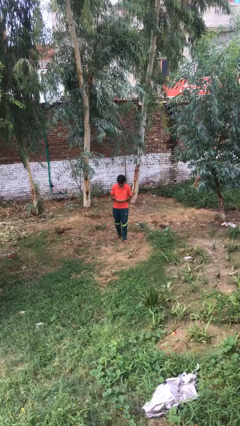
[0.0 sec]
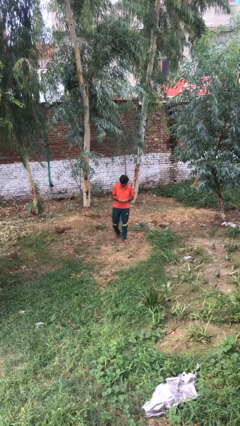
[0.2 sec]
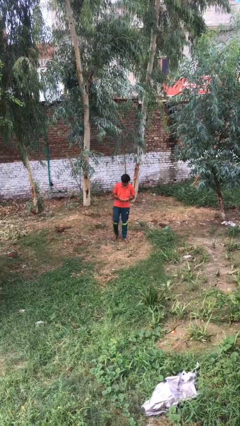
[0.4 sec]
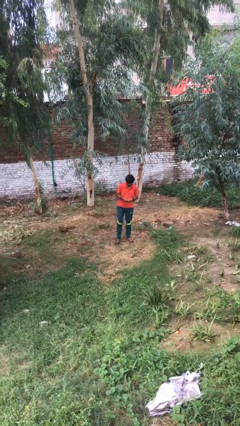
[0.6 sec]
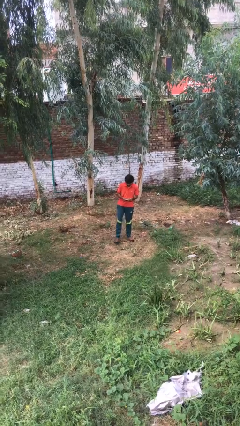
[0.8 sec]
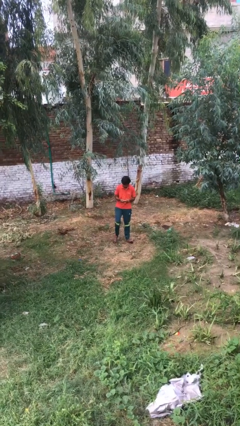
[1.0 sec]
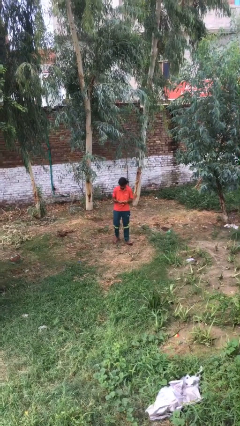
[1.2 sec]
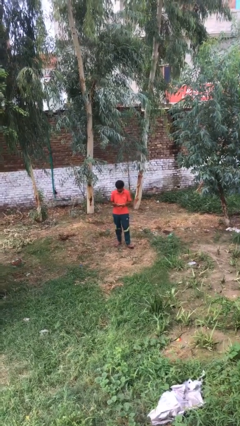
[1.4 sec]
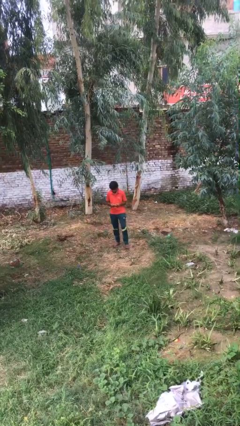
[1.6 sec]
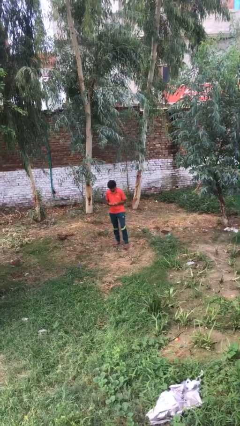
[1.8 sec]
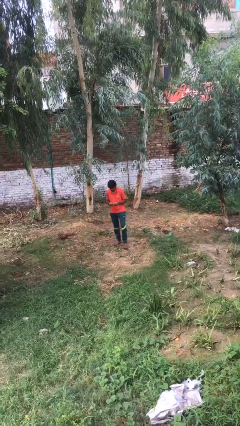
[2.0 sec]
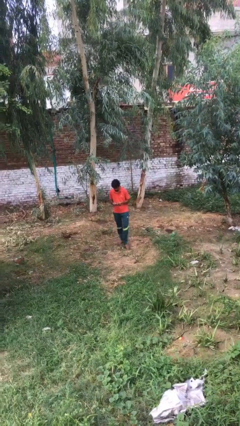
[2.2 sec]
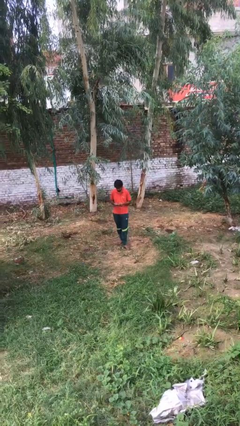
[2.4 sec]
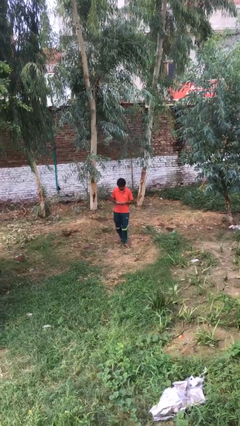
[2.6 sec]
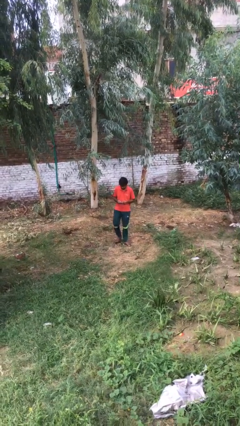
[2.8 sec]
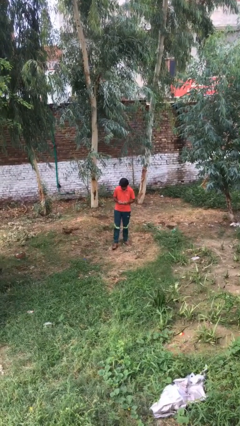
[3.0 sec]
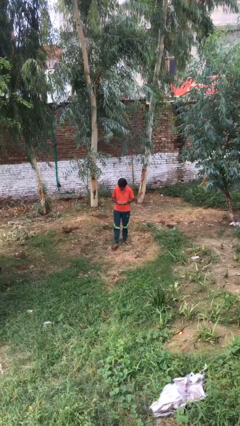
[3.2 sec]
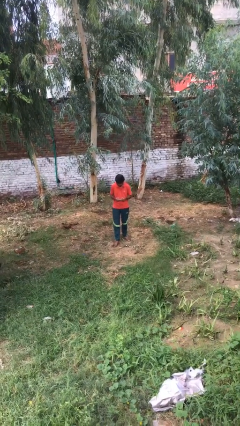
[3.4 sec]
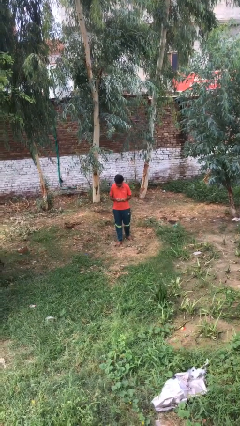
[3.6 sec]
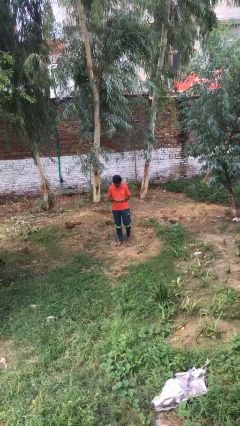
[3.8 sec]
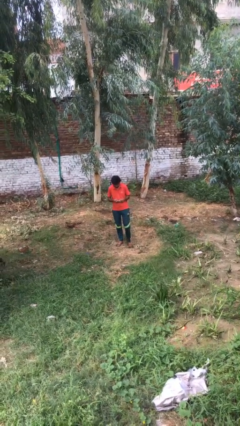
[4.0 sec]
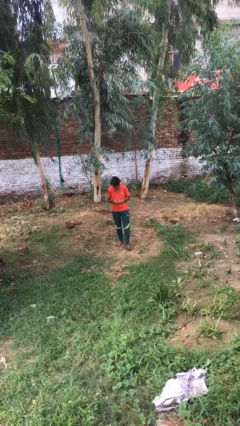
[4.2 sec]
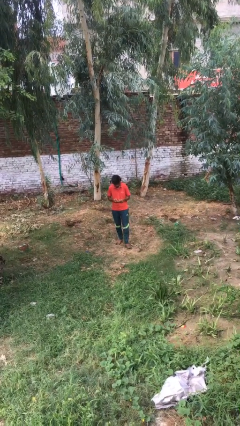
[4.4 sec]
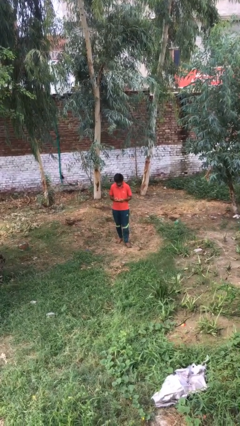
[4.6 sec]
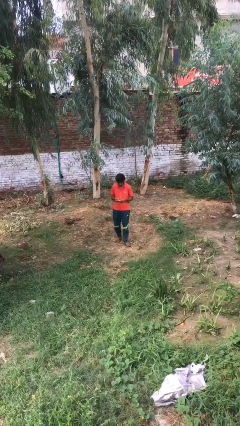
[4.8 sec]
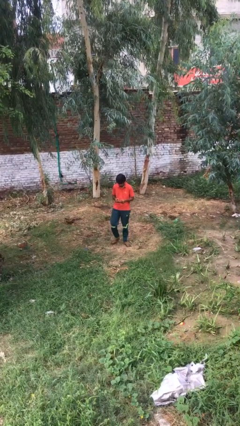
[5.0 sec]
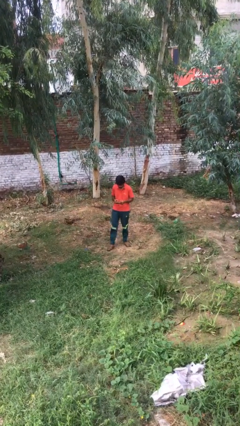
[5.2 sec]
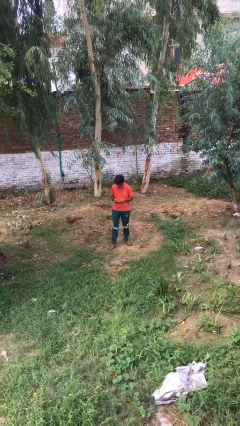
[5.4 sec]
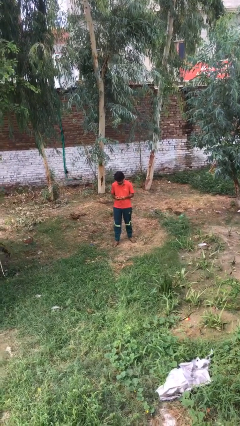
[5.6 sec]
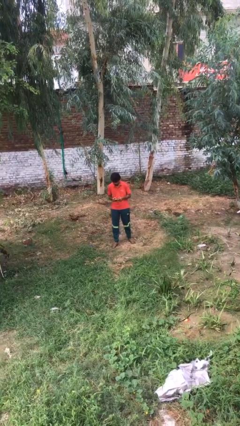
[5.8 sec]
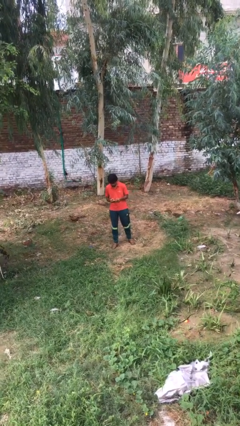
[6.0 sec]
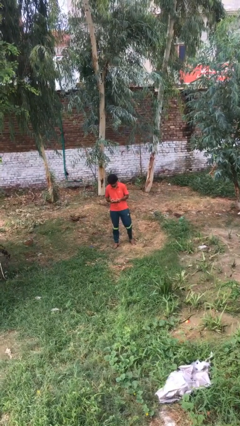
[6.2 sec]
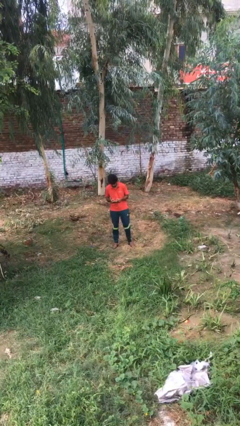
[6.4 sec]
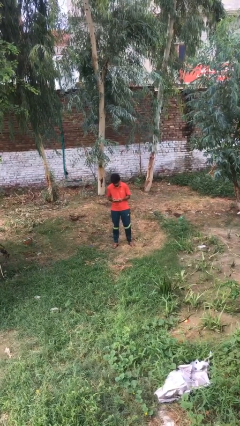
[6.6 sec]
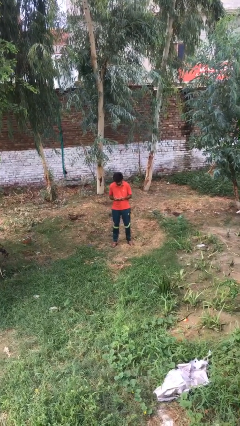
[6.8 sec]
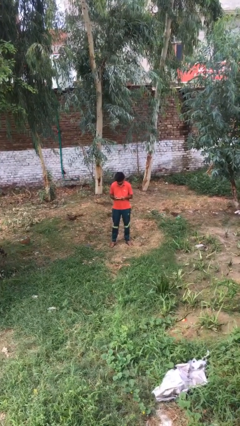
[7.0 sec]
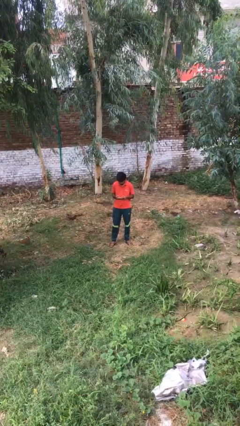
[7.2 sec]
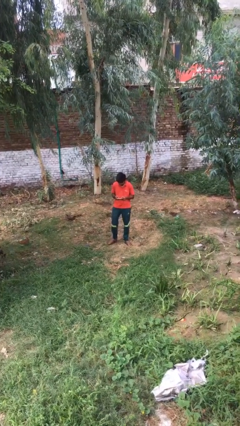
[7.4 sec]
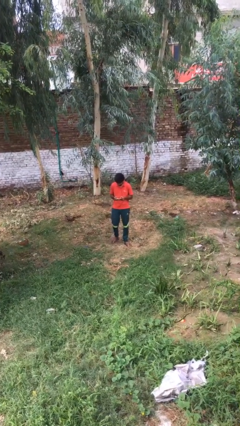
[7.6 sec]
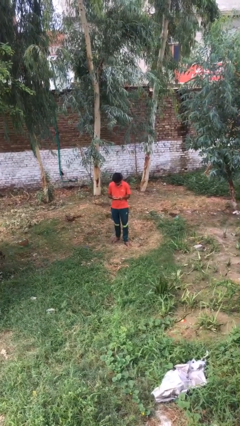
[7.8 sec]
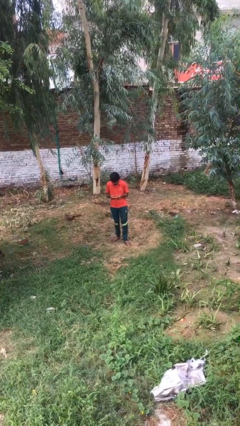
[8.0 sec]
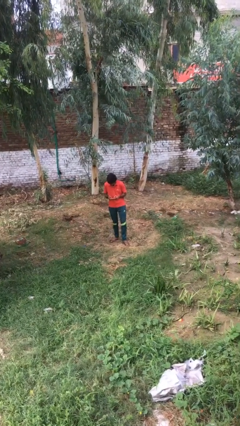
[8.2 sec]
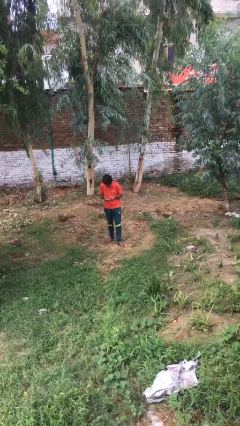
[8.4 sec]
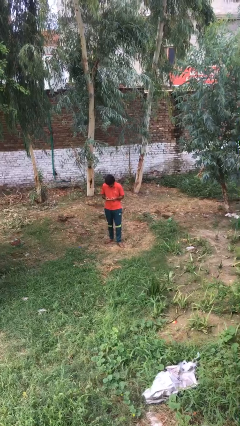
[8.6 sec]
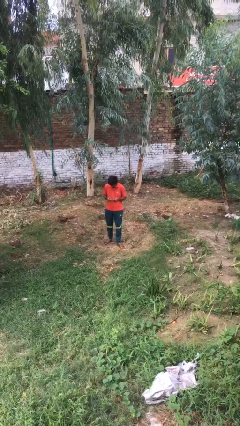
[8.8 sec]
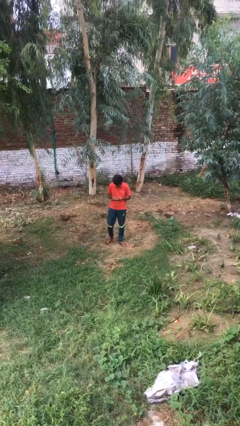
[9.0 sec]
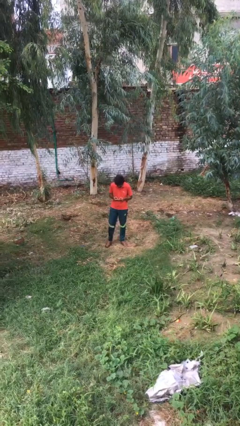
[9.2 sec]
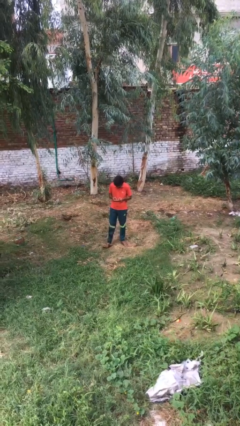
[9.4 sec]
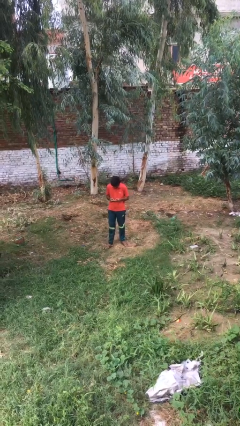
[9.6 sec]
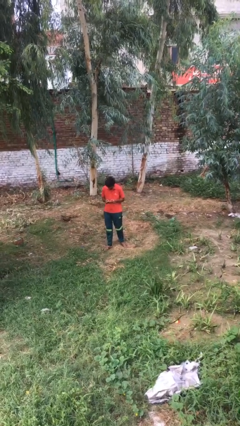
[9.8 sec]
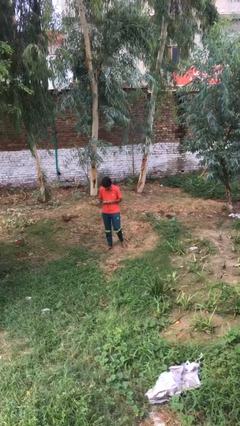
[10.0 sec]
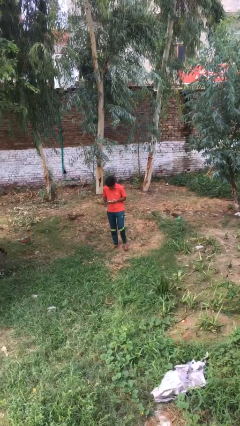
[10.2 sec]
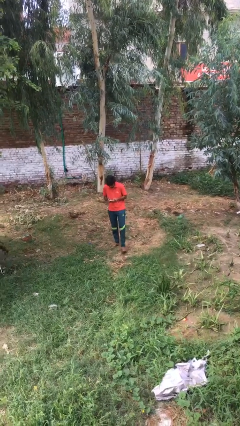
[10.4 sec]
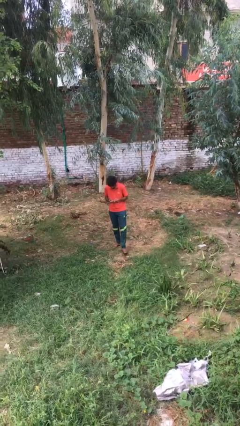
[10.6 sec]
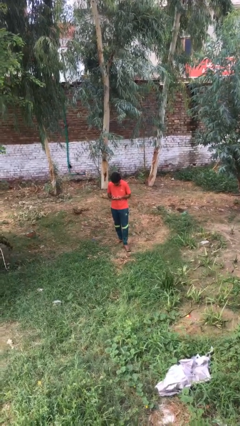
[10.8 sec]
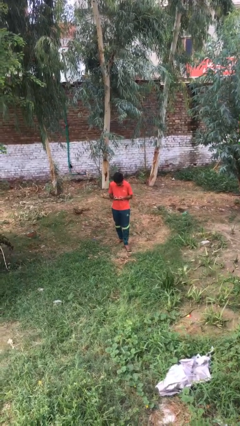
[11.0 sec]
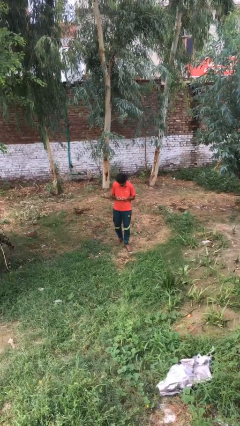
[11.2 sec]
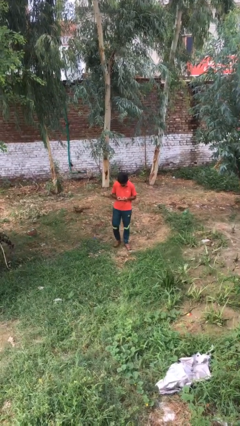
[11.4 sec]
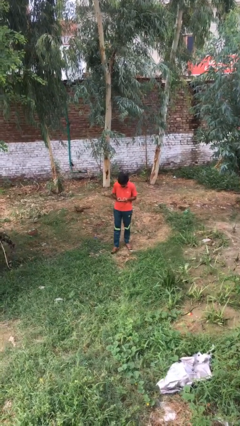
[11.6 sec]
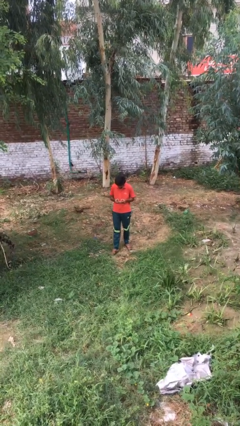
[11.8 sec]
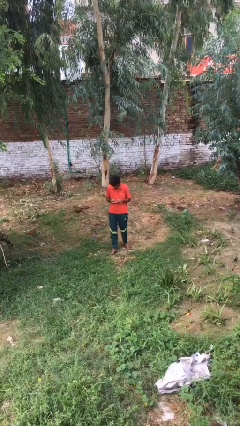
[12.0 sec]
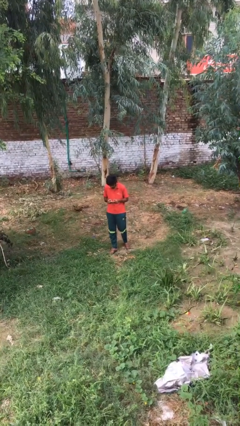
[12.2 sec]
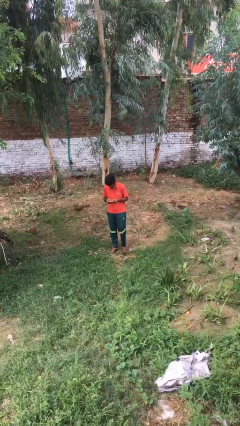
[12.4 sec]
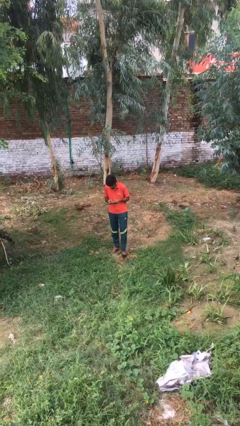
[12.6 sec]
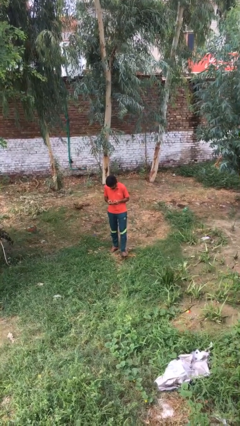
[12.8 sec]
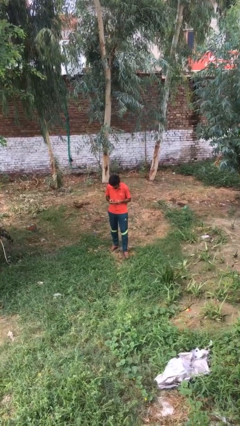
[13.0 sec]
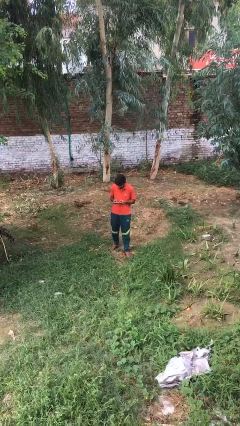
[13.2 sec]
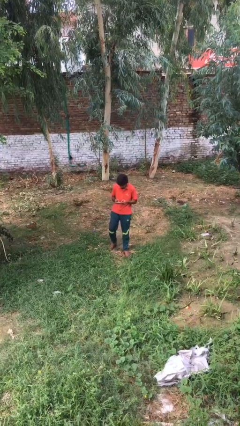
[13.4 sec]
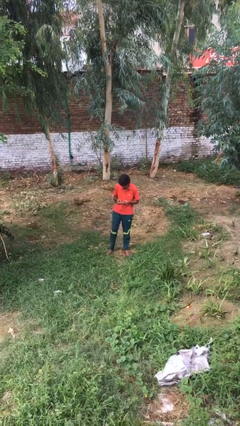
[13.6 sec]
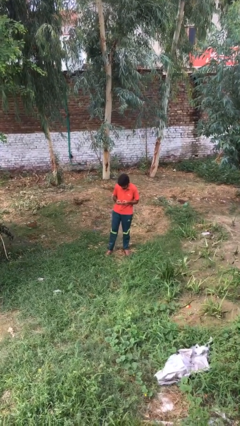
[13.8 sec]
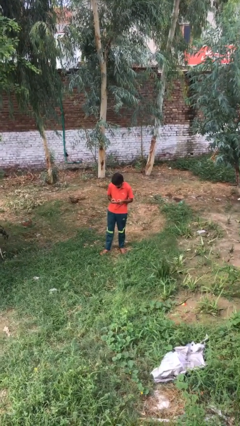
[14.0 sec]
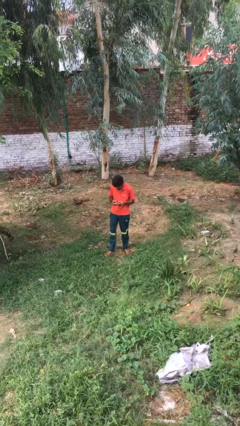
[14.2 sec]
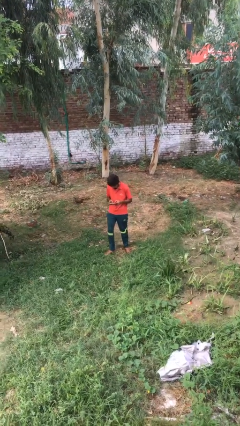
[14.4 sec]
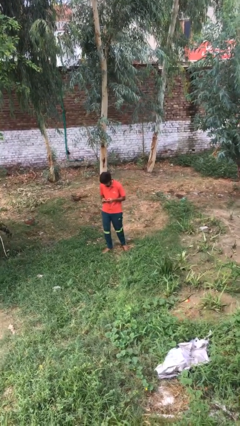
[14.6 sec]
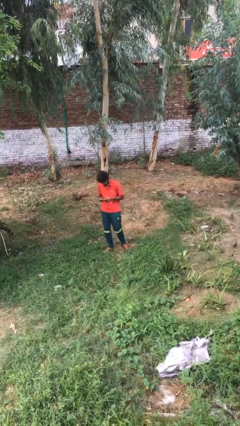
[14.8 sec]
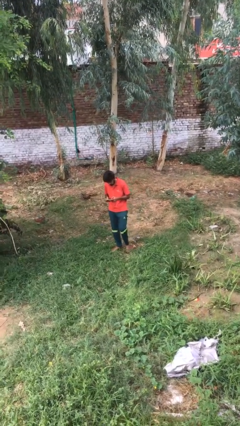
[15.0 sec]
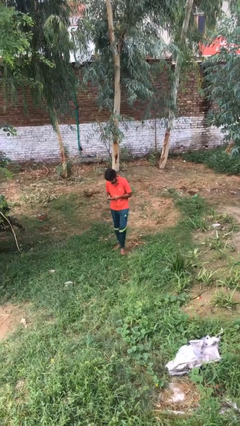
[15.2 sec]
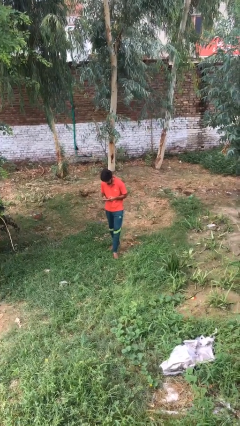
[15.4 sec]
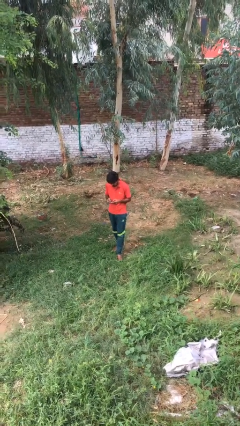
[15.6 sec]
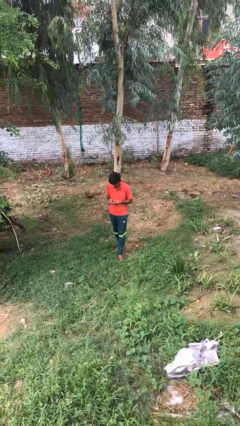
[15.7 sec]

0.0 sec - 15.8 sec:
person texts on phone

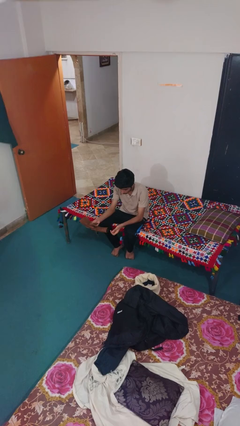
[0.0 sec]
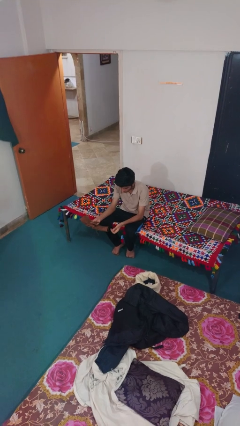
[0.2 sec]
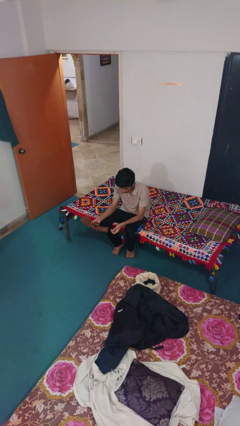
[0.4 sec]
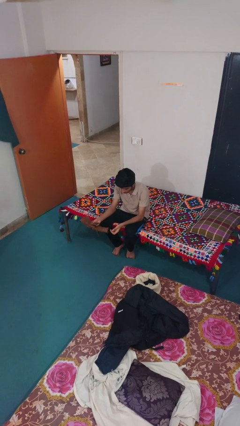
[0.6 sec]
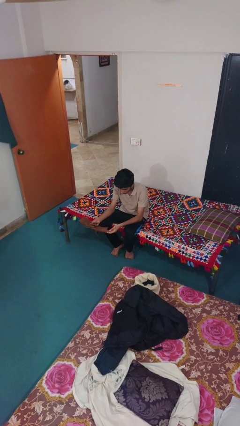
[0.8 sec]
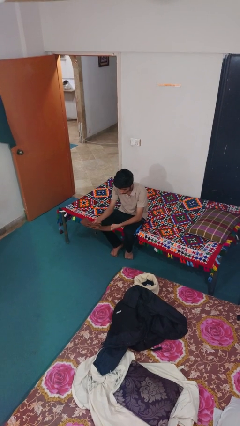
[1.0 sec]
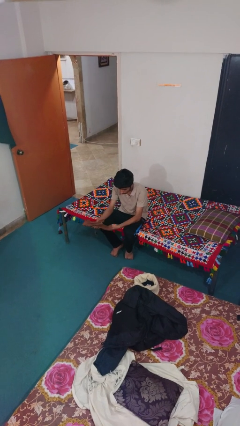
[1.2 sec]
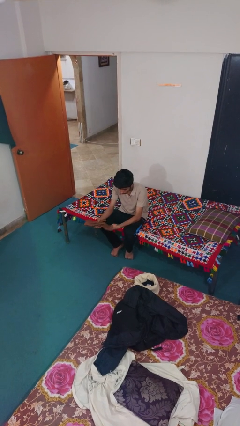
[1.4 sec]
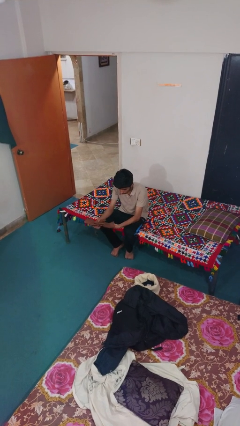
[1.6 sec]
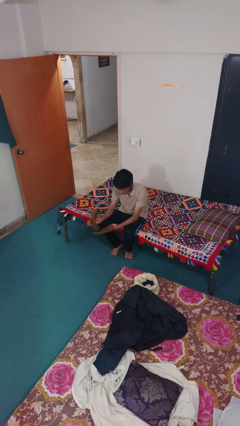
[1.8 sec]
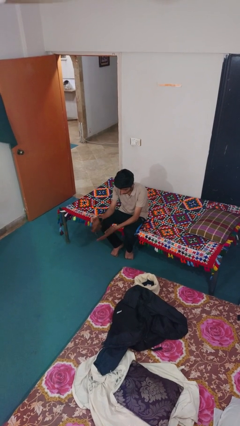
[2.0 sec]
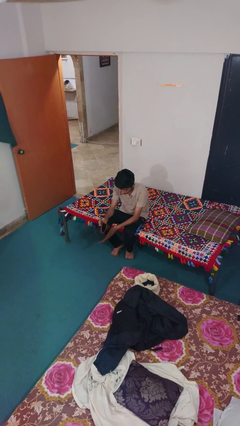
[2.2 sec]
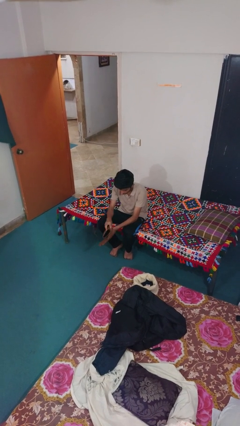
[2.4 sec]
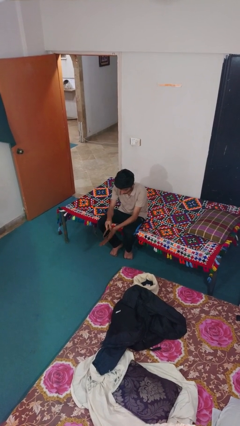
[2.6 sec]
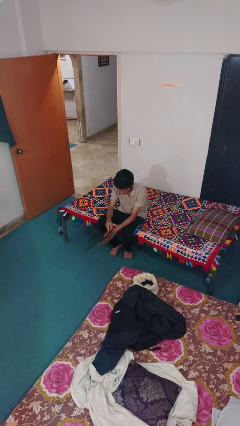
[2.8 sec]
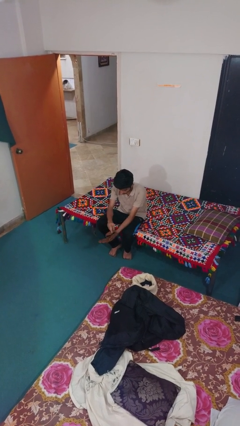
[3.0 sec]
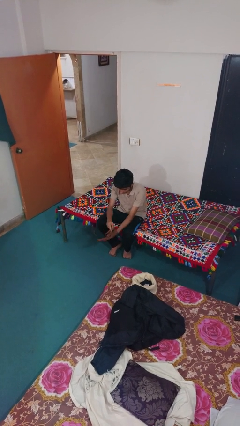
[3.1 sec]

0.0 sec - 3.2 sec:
person puts on gloves
